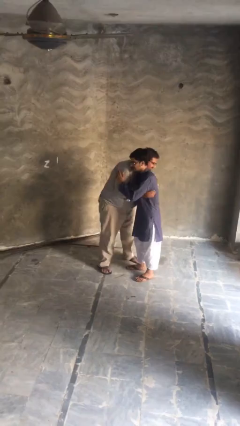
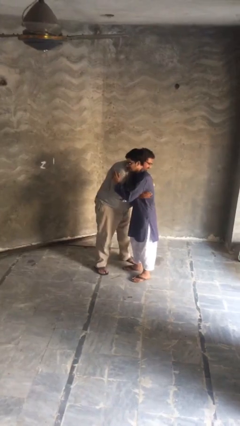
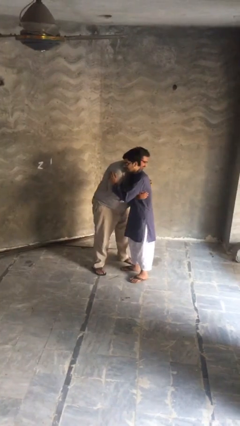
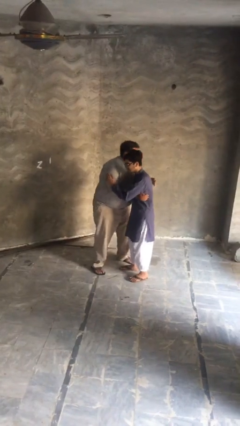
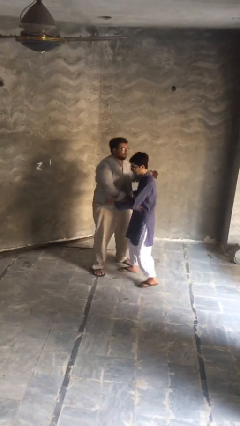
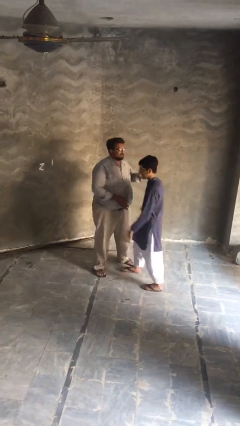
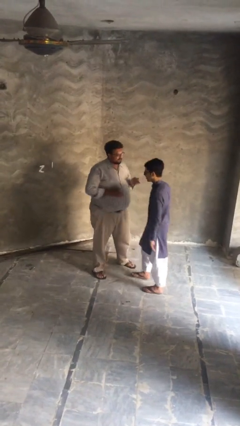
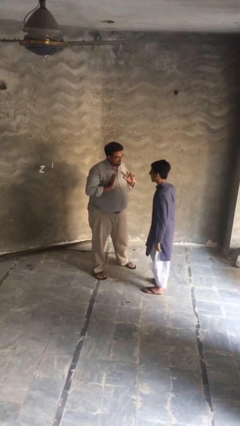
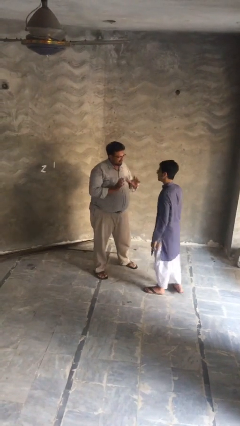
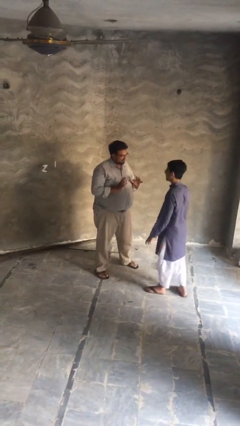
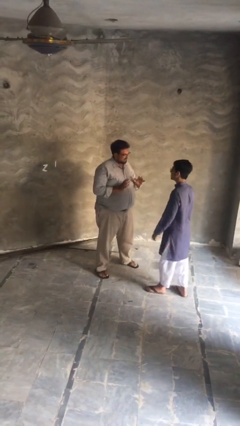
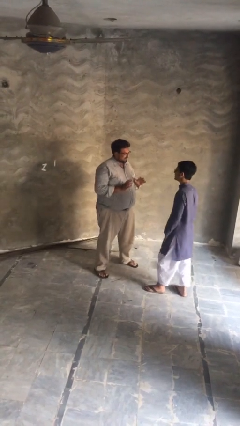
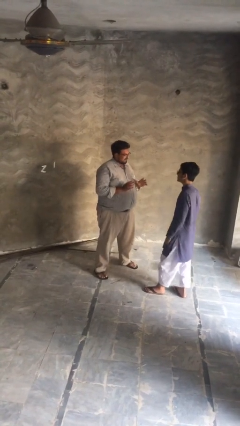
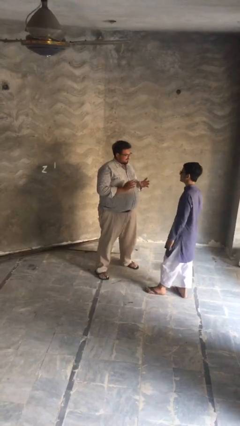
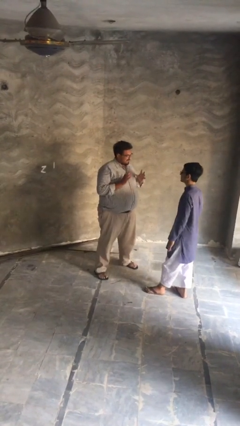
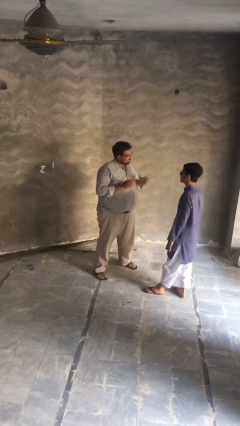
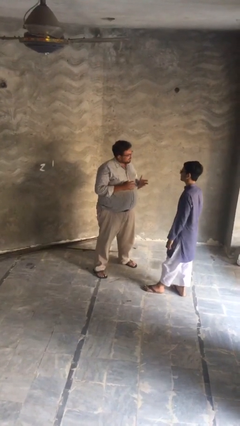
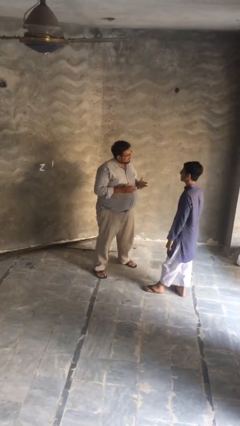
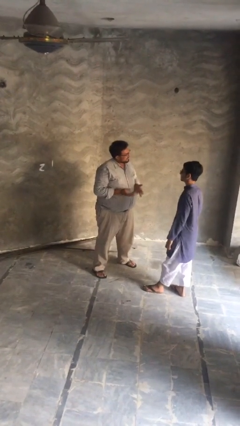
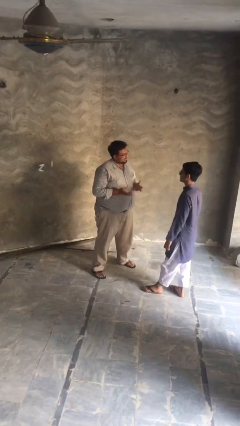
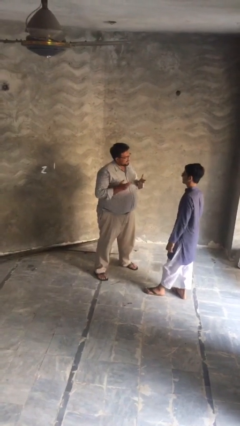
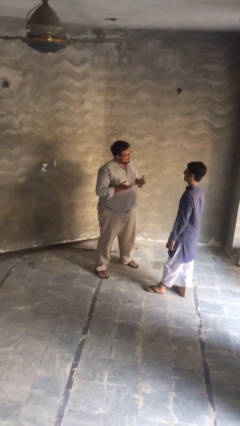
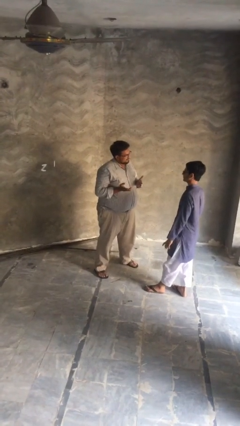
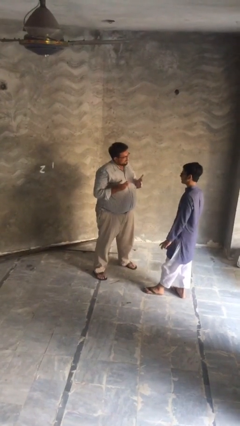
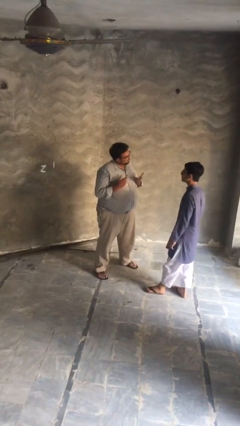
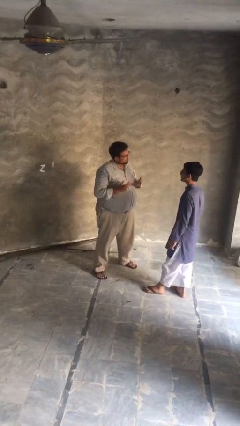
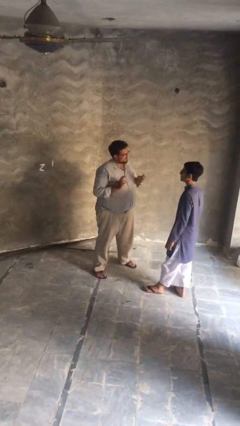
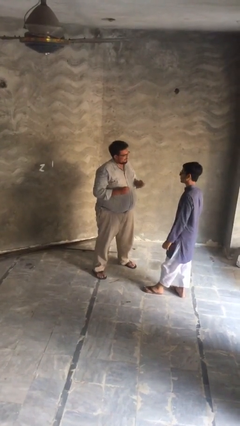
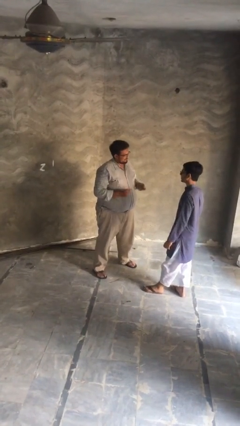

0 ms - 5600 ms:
person talks to person

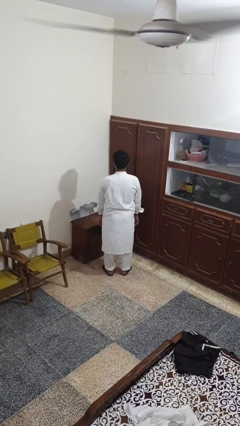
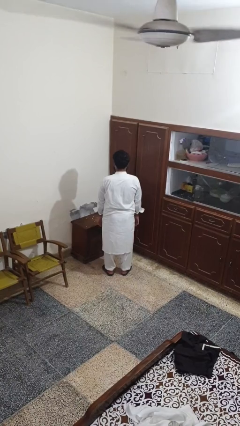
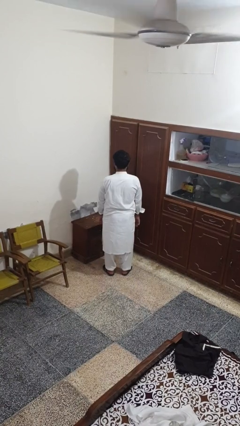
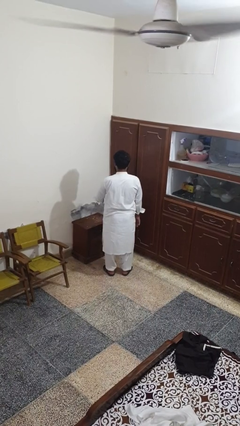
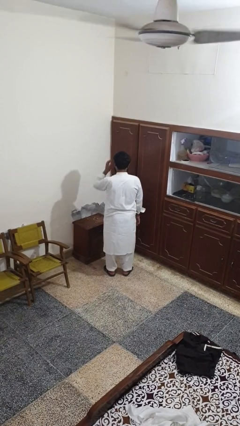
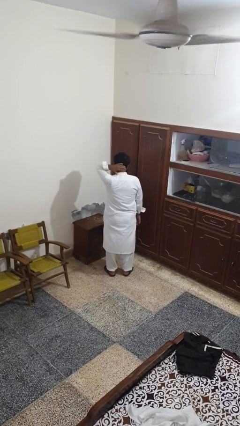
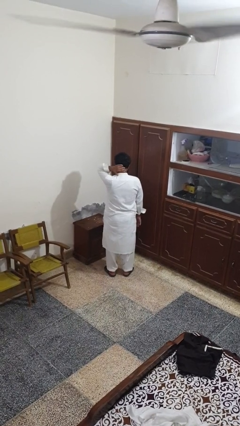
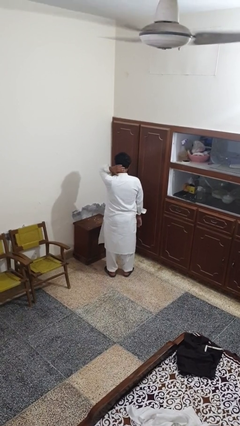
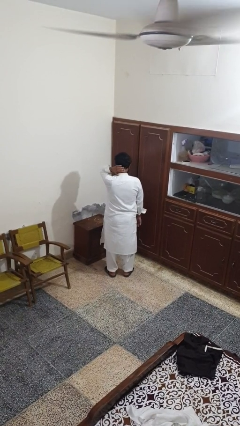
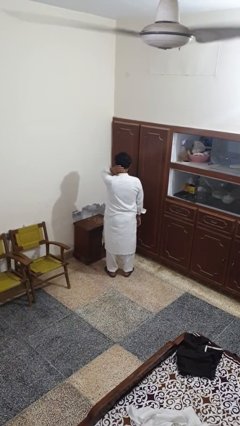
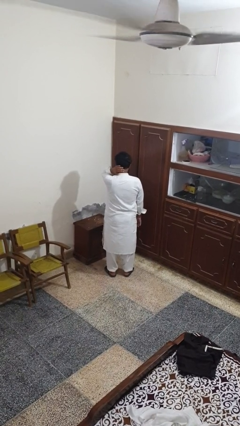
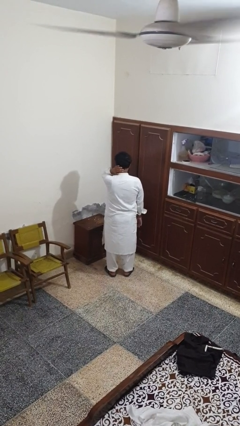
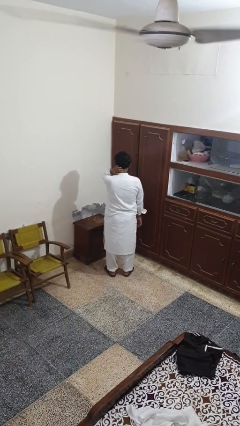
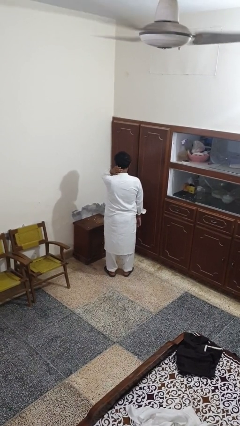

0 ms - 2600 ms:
person rubs neck

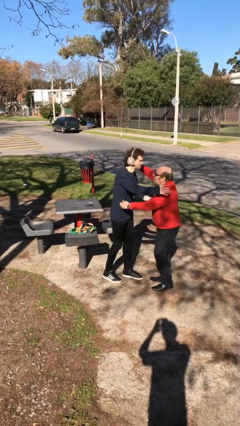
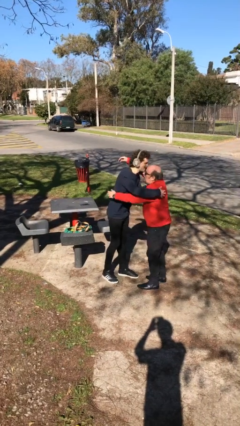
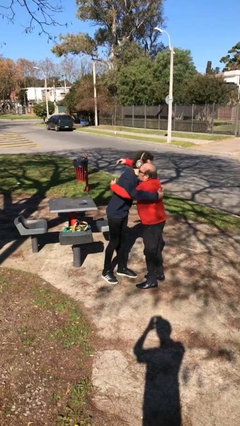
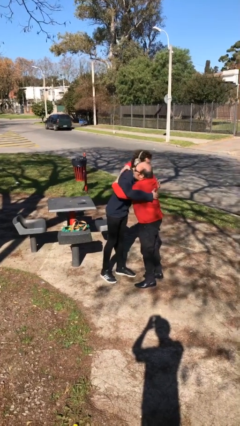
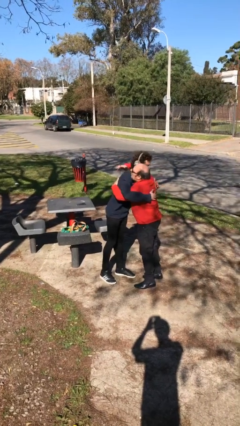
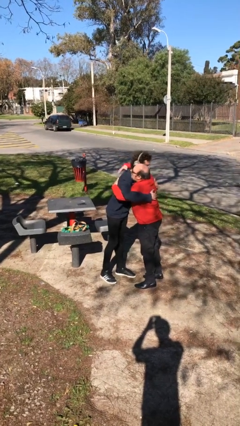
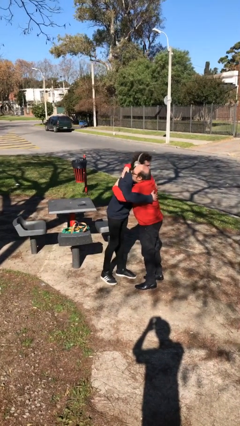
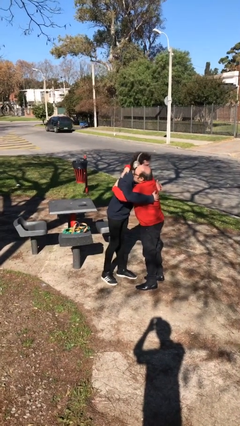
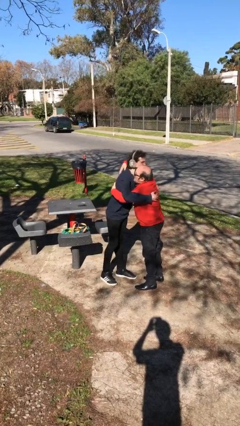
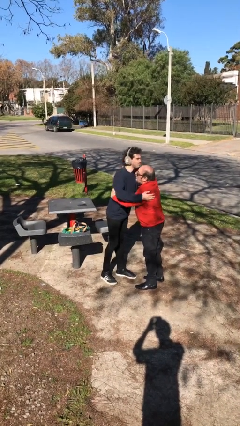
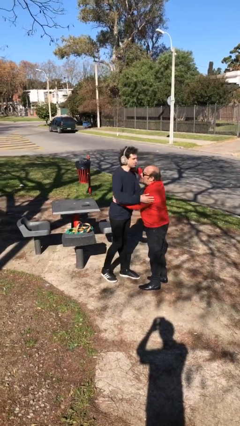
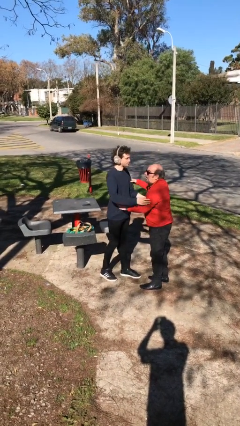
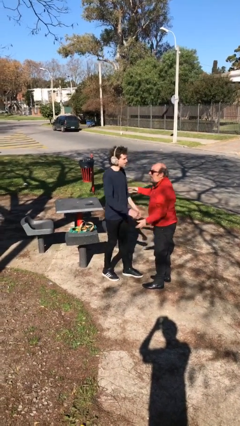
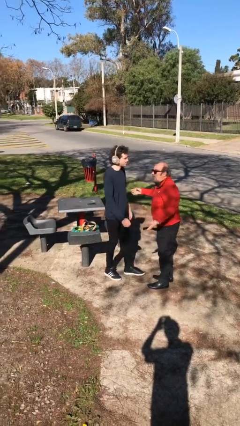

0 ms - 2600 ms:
person embraces person

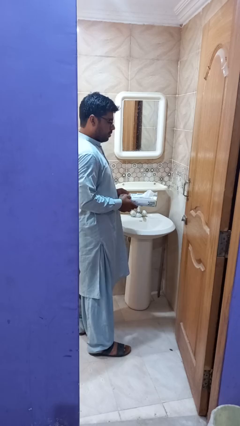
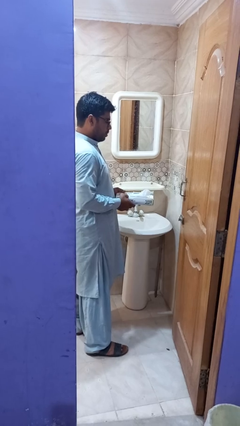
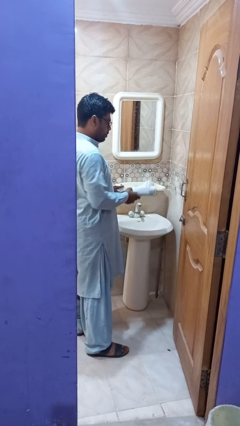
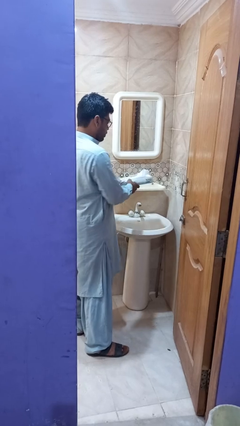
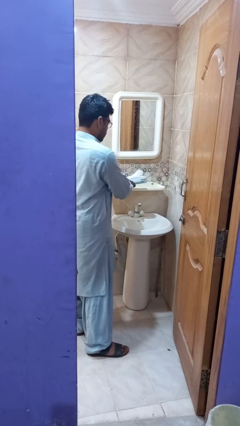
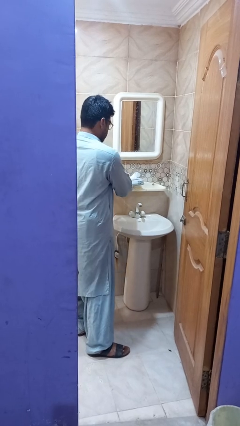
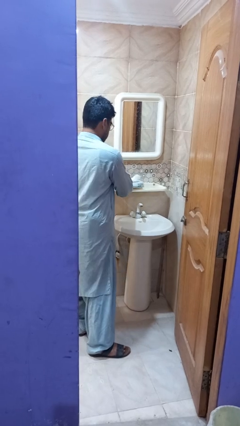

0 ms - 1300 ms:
person puts down object on countertop

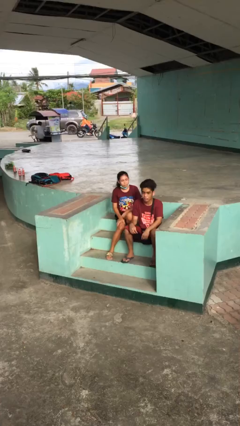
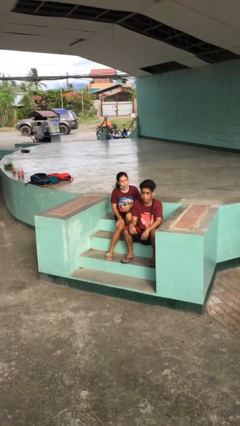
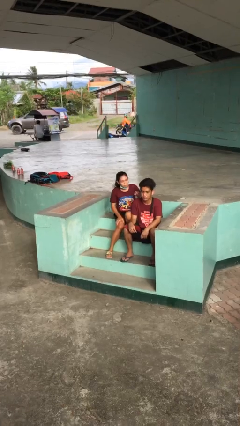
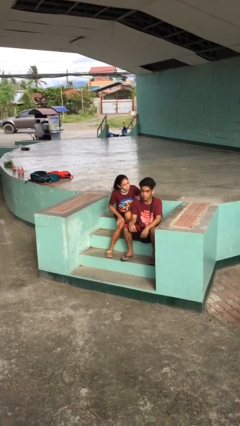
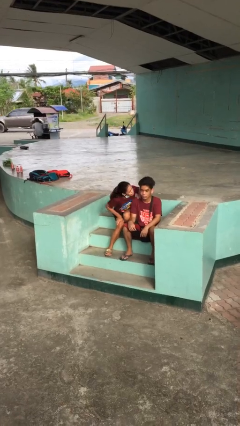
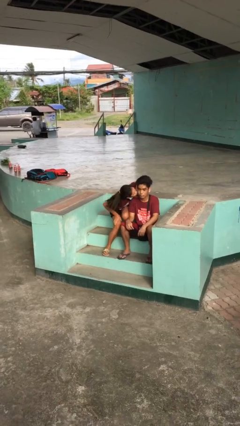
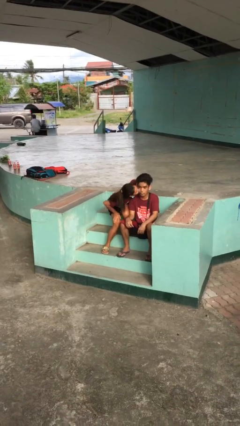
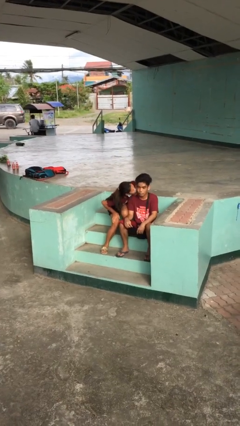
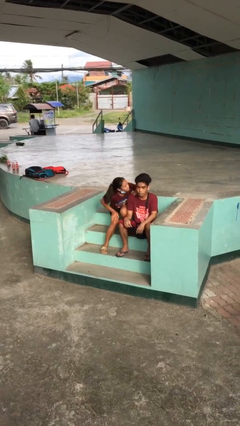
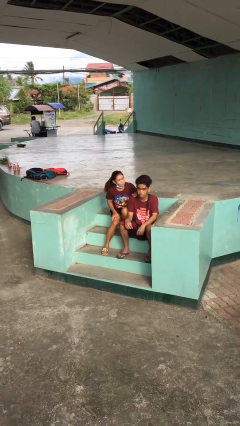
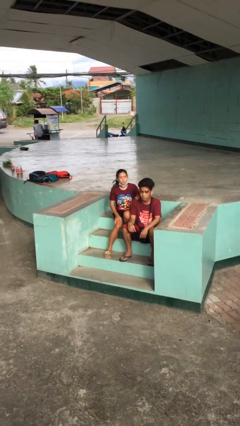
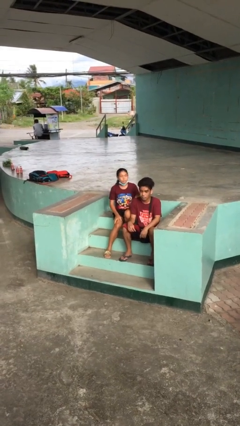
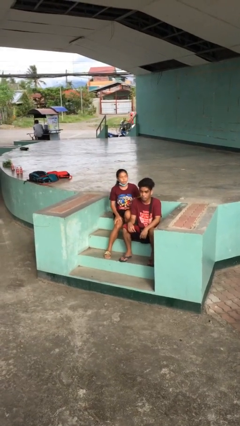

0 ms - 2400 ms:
person kisses cheek of person

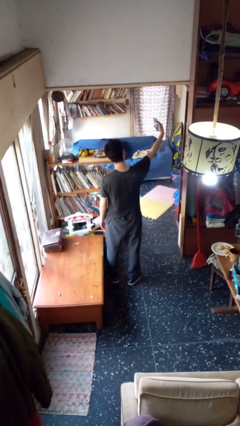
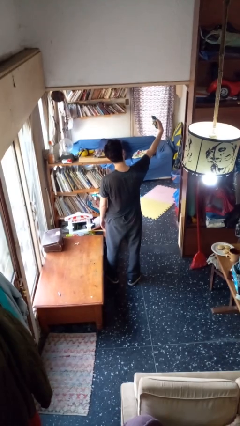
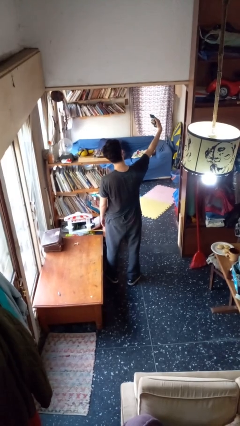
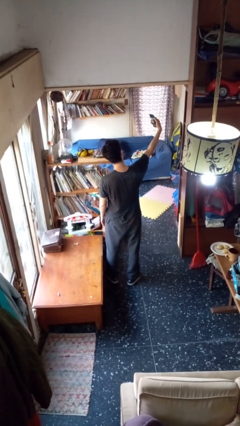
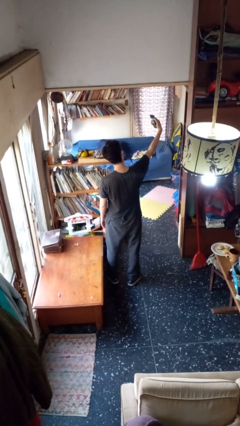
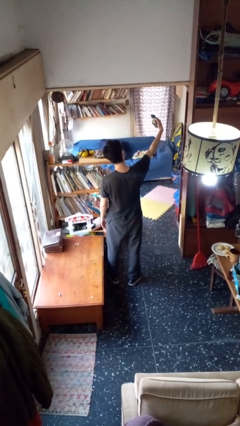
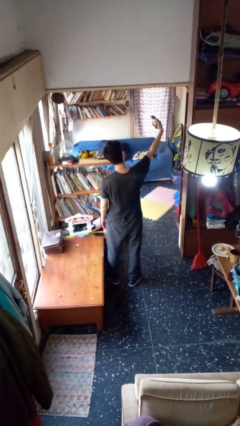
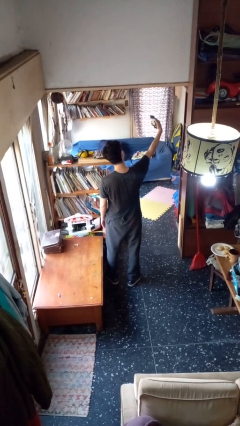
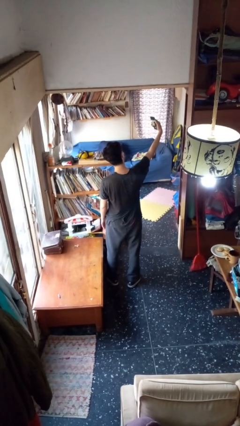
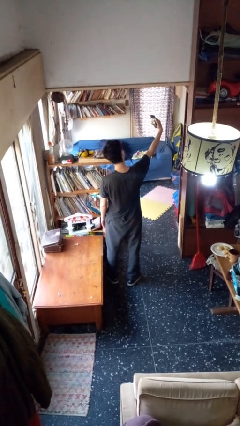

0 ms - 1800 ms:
person takes selfie

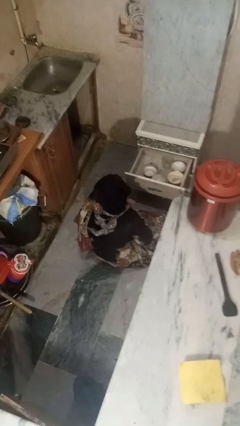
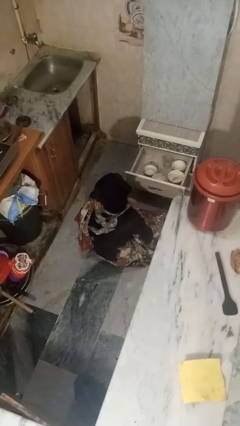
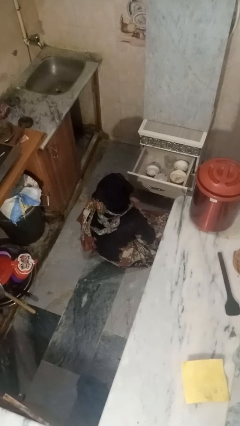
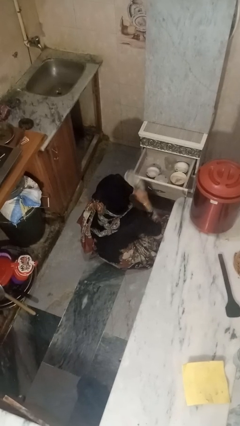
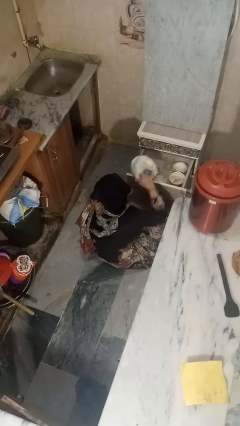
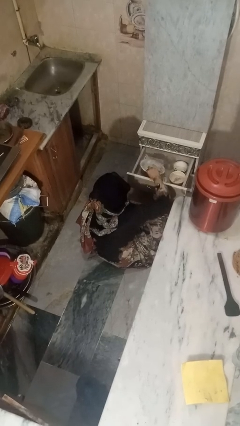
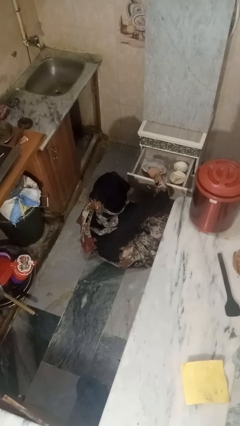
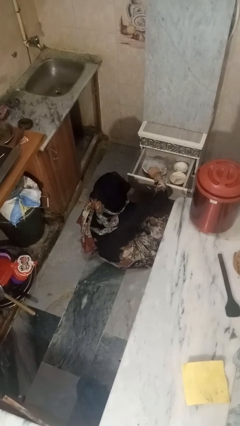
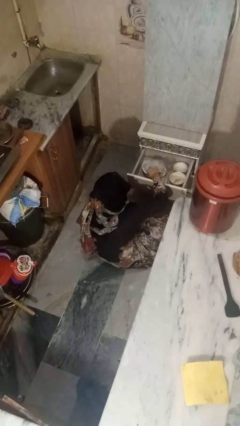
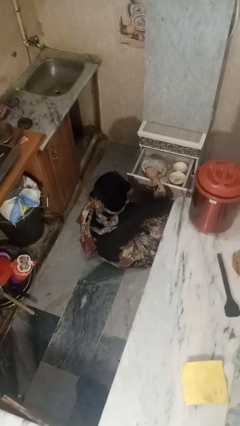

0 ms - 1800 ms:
person puts object into kitchen drawer
